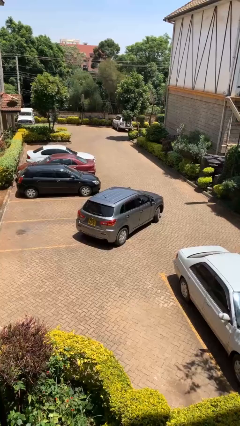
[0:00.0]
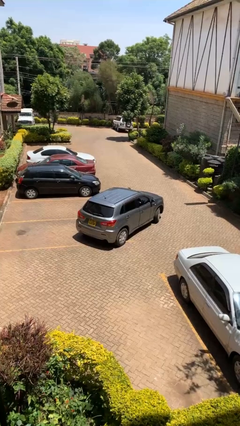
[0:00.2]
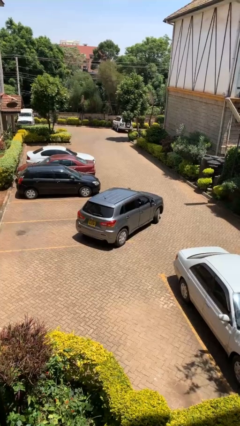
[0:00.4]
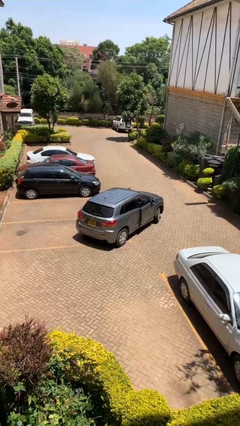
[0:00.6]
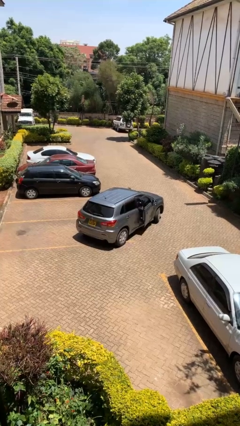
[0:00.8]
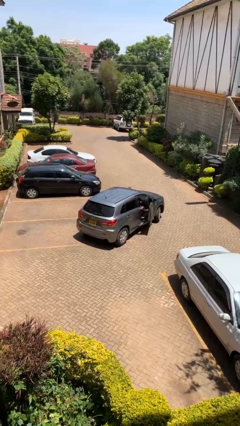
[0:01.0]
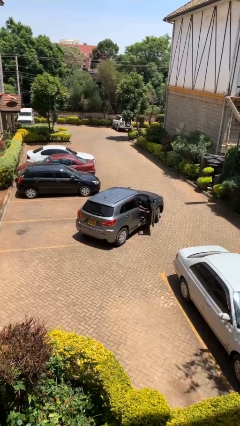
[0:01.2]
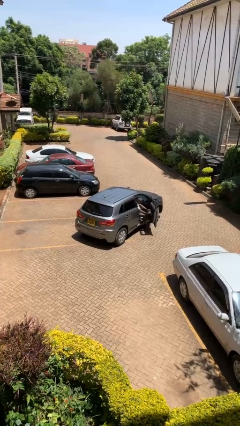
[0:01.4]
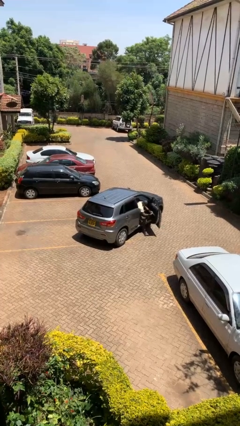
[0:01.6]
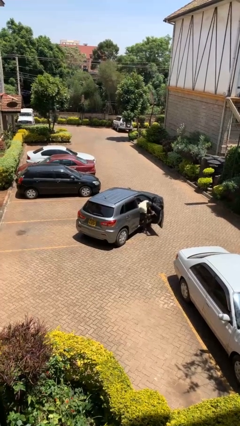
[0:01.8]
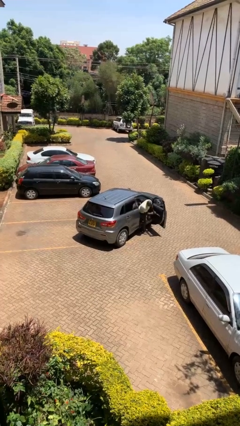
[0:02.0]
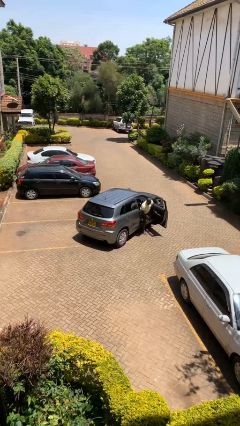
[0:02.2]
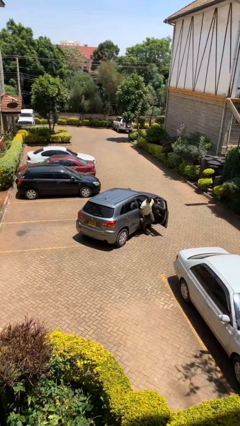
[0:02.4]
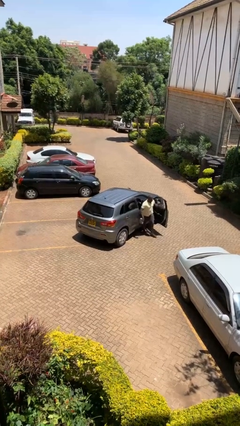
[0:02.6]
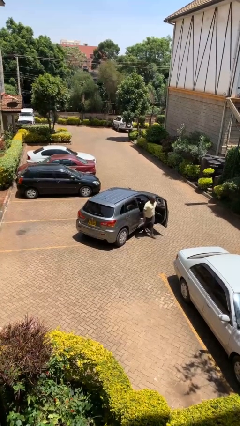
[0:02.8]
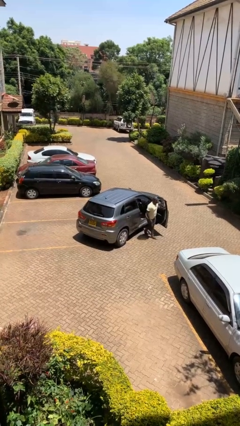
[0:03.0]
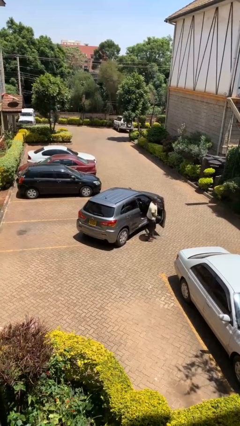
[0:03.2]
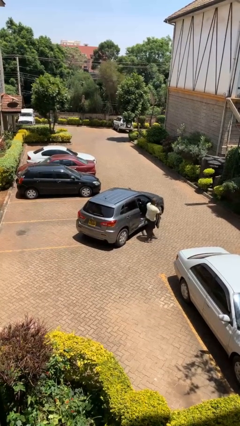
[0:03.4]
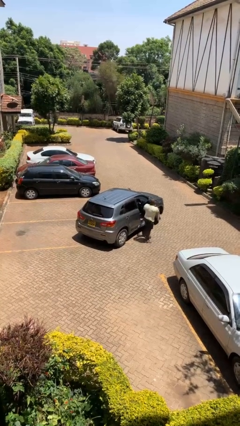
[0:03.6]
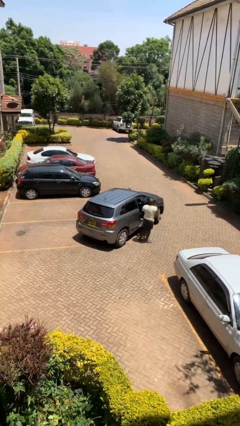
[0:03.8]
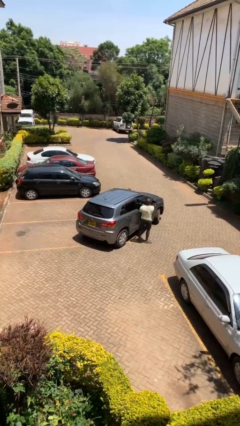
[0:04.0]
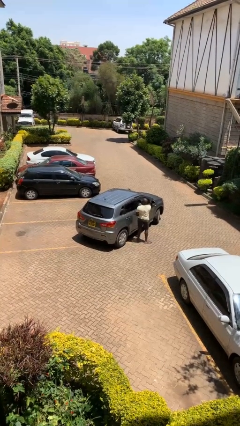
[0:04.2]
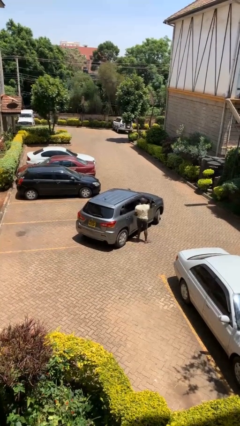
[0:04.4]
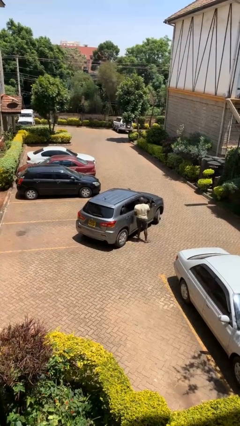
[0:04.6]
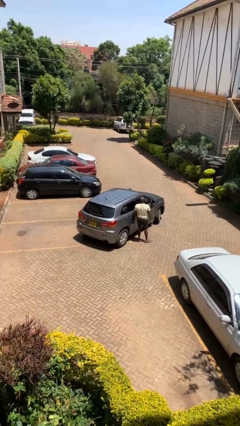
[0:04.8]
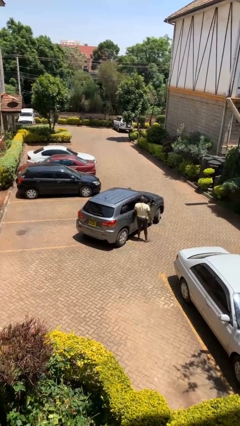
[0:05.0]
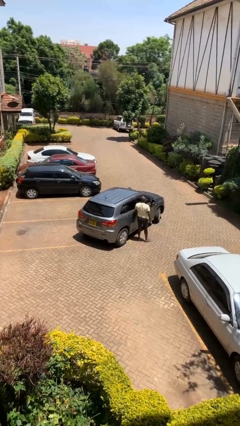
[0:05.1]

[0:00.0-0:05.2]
car drops off person

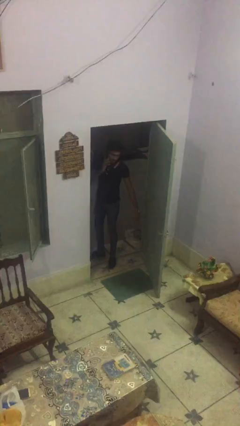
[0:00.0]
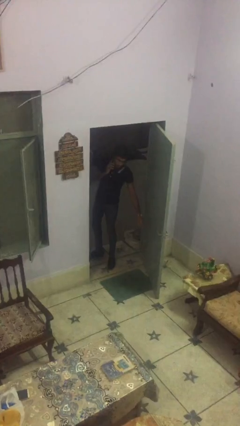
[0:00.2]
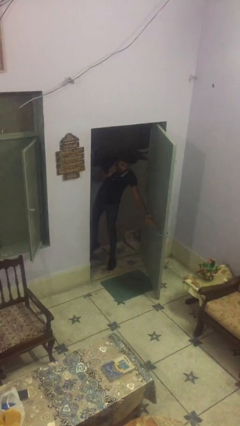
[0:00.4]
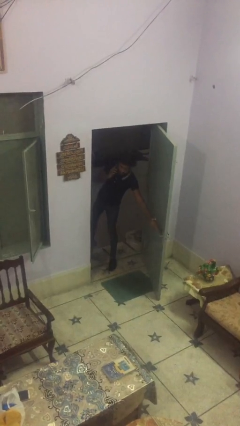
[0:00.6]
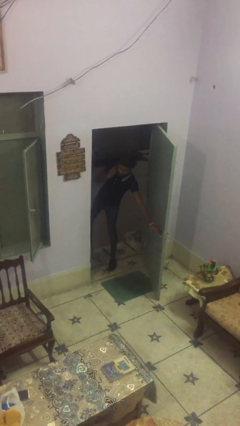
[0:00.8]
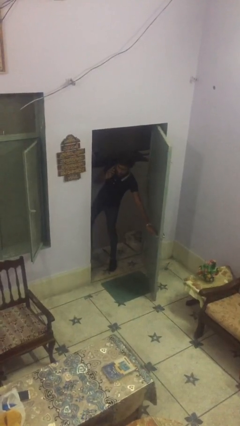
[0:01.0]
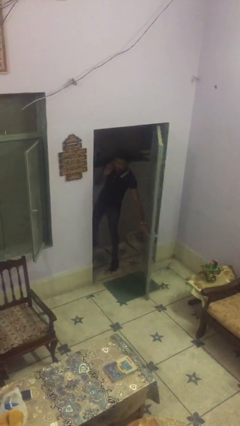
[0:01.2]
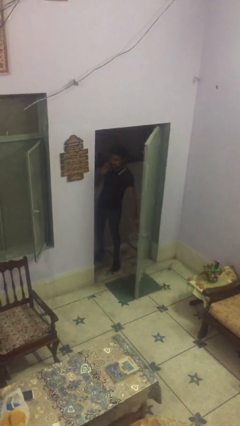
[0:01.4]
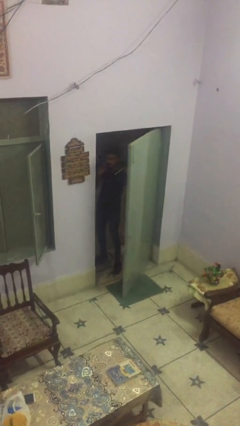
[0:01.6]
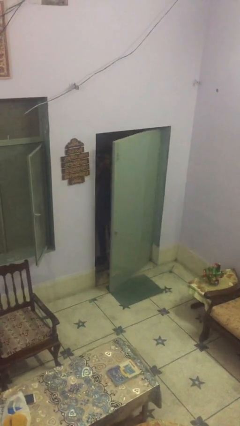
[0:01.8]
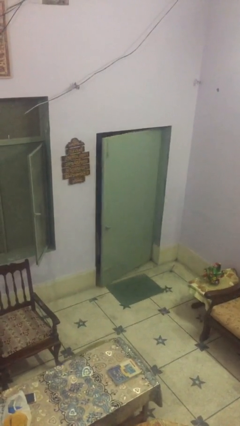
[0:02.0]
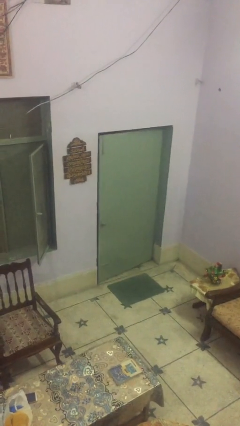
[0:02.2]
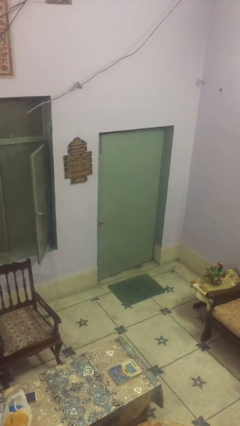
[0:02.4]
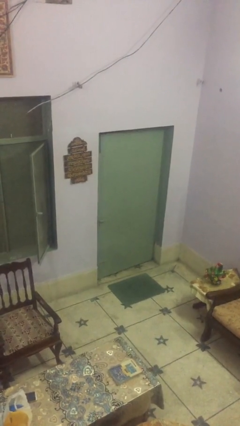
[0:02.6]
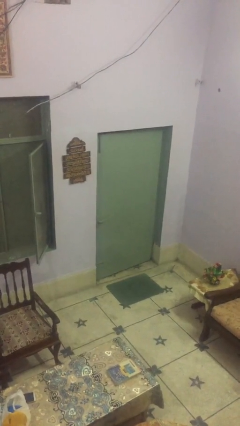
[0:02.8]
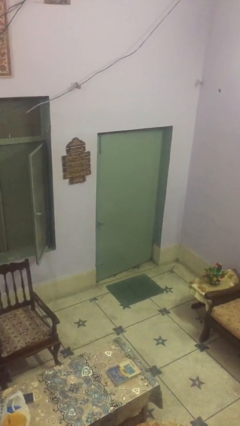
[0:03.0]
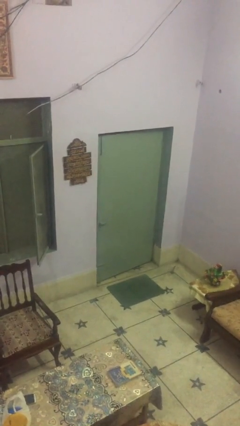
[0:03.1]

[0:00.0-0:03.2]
person closes facility door

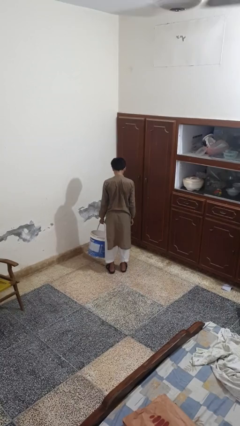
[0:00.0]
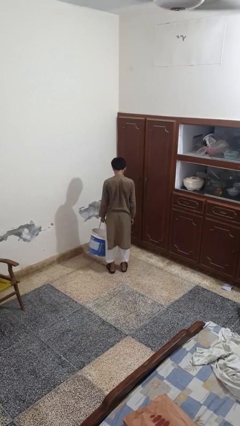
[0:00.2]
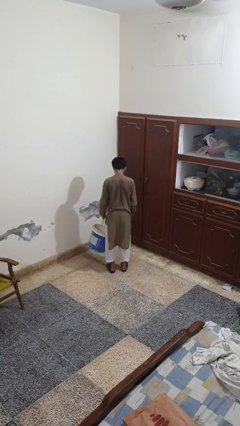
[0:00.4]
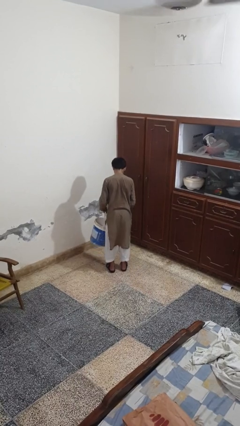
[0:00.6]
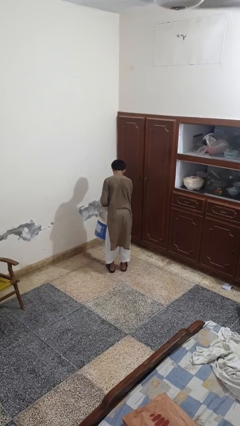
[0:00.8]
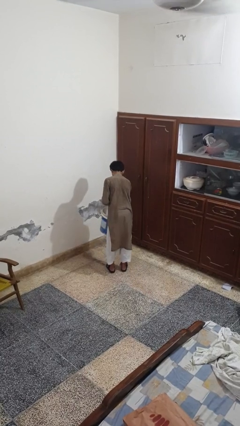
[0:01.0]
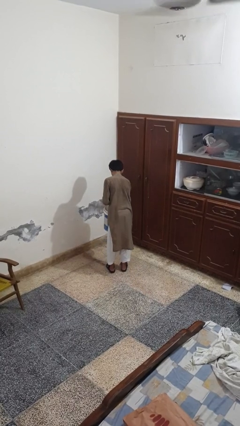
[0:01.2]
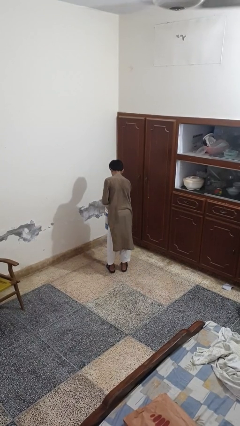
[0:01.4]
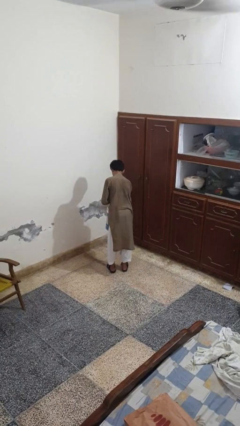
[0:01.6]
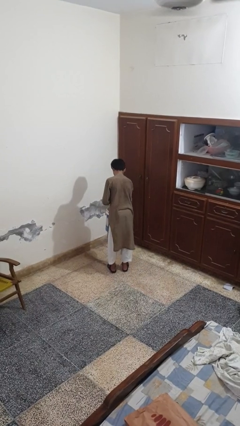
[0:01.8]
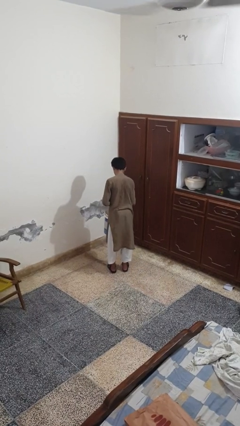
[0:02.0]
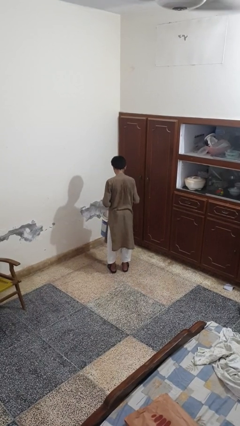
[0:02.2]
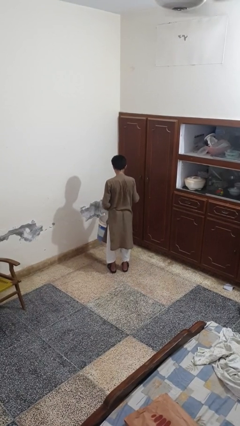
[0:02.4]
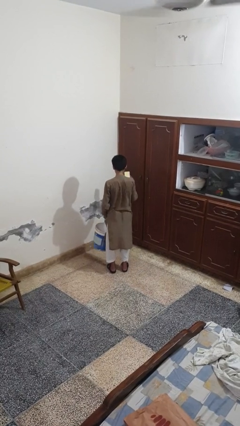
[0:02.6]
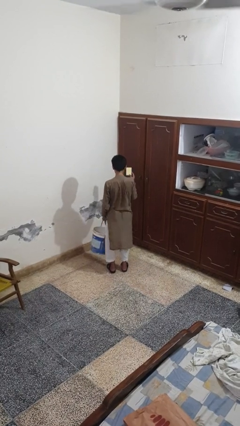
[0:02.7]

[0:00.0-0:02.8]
person takes object from basket

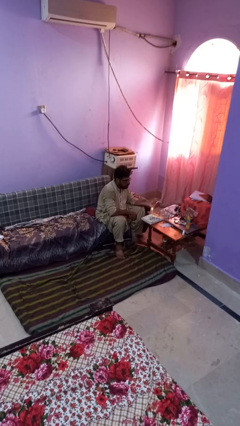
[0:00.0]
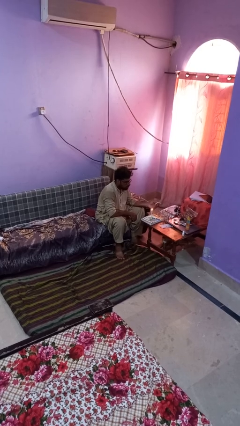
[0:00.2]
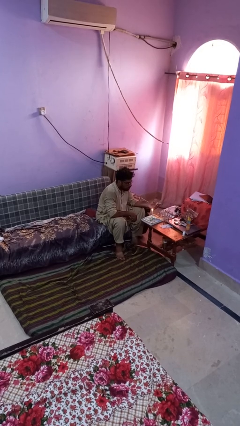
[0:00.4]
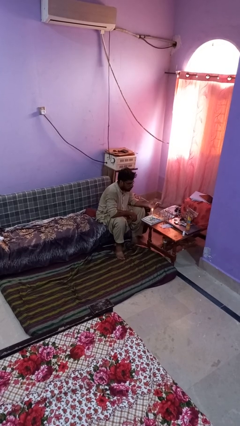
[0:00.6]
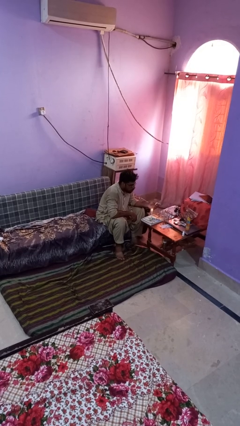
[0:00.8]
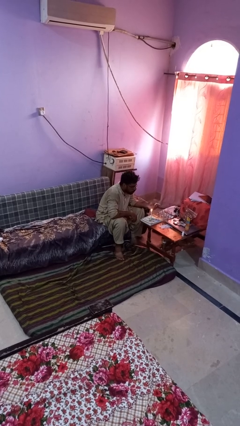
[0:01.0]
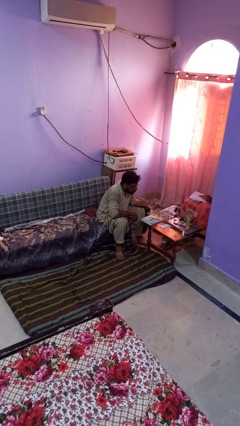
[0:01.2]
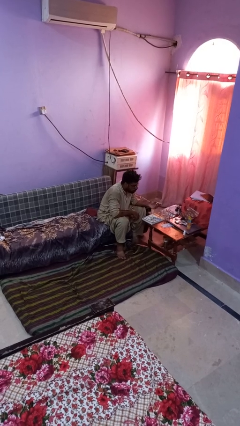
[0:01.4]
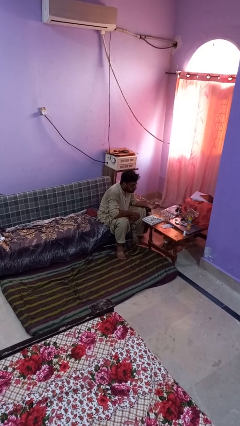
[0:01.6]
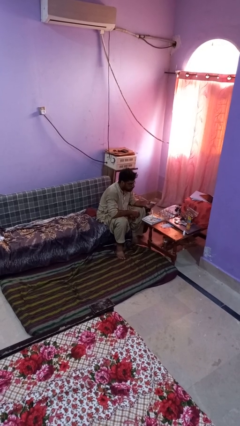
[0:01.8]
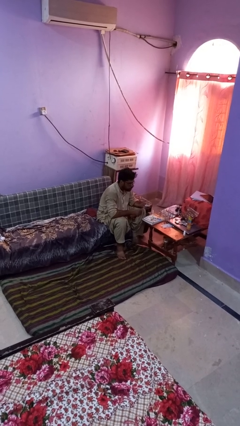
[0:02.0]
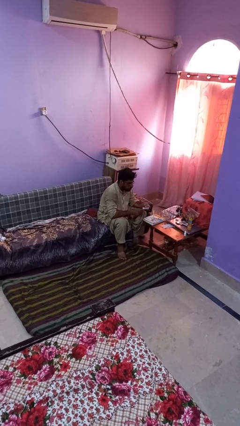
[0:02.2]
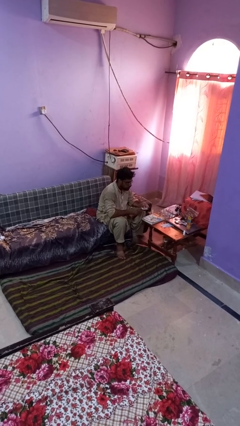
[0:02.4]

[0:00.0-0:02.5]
person extinguishes candle

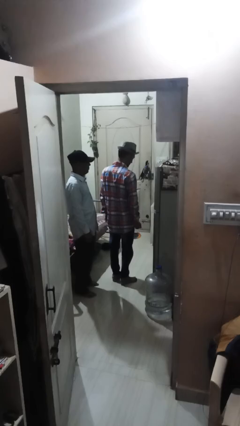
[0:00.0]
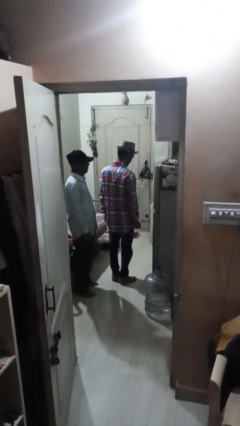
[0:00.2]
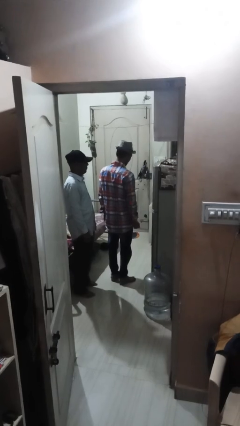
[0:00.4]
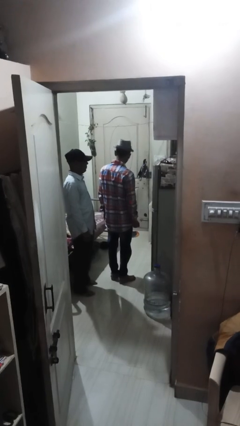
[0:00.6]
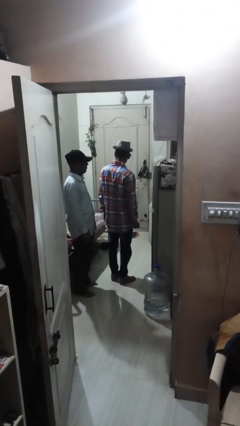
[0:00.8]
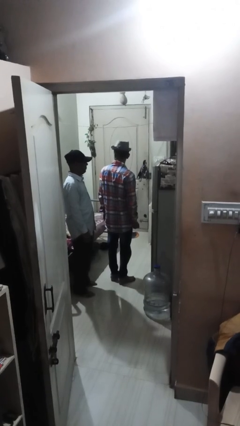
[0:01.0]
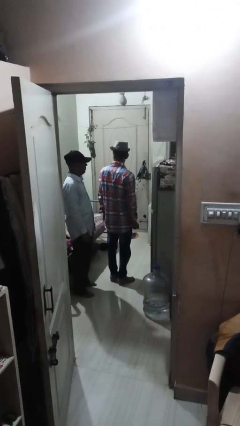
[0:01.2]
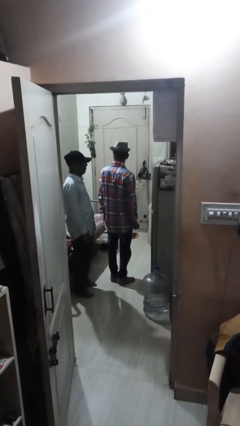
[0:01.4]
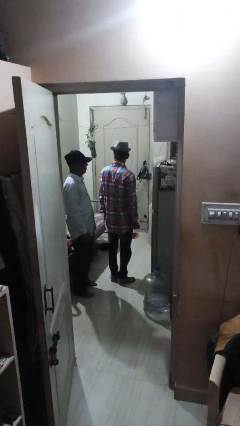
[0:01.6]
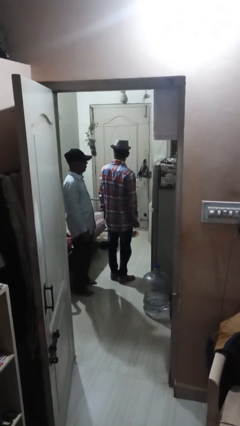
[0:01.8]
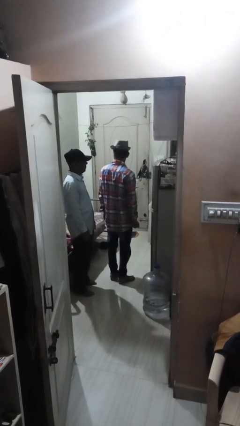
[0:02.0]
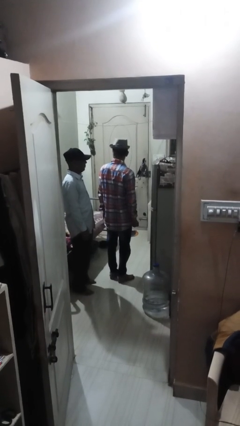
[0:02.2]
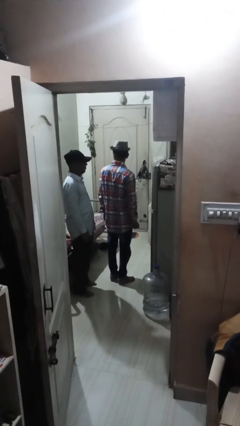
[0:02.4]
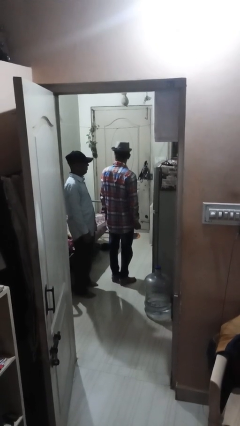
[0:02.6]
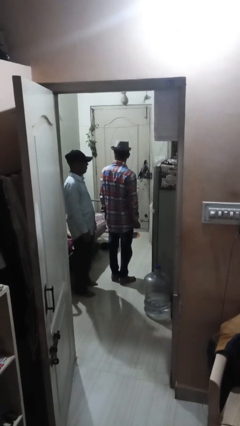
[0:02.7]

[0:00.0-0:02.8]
person looks over shoulder

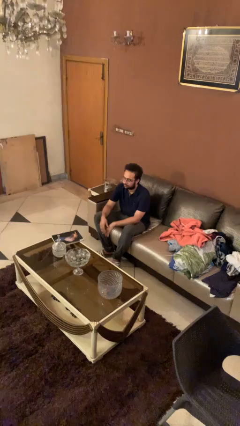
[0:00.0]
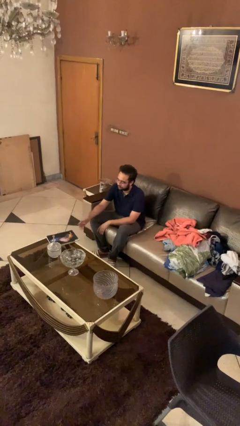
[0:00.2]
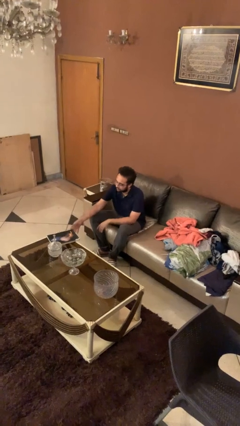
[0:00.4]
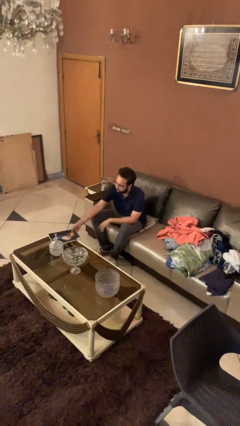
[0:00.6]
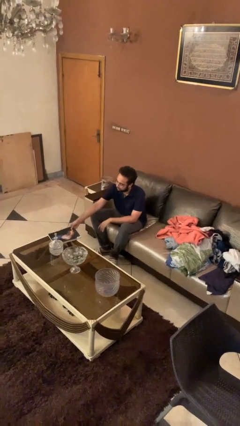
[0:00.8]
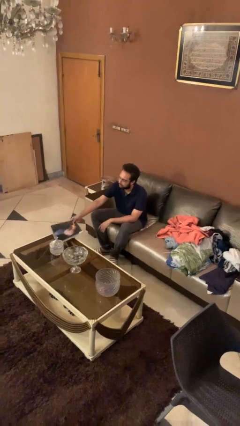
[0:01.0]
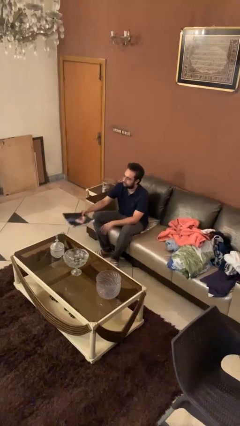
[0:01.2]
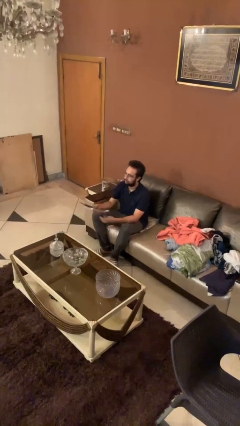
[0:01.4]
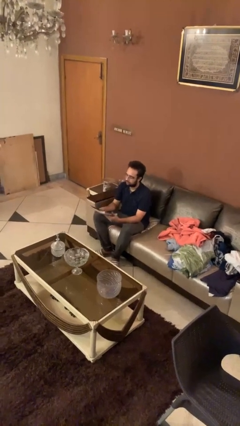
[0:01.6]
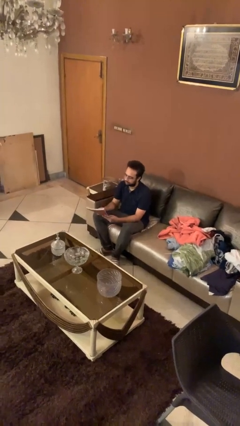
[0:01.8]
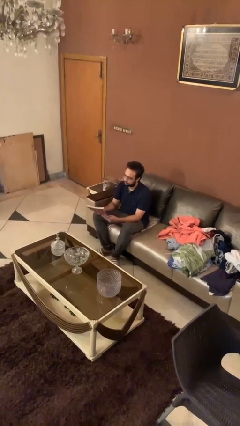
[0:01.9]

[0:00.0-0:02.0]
person picks up object from table
